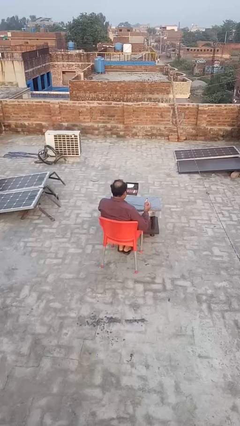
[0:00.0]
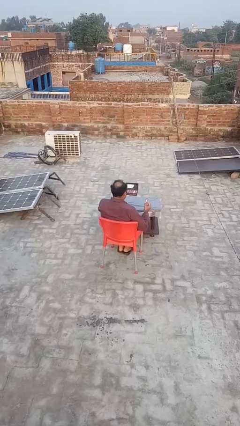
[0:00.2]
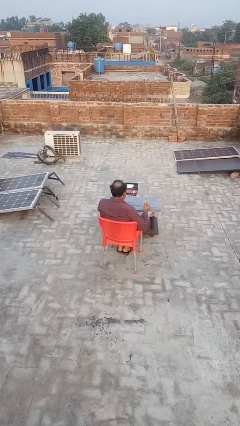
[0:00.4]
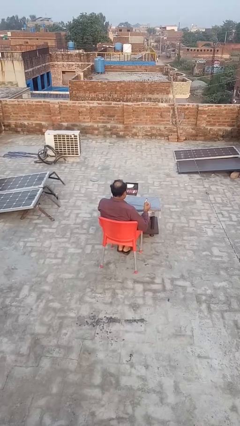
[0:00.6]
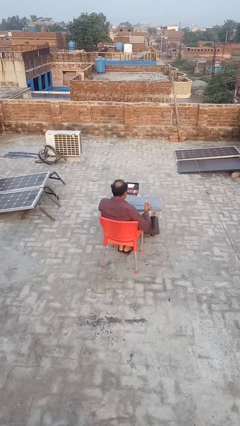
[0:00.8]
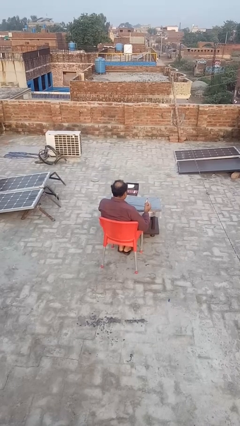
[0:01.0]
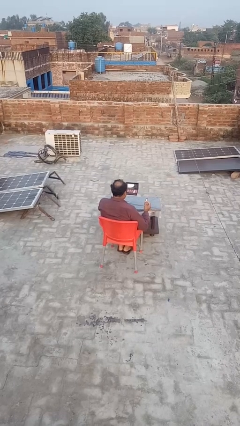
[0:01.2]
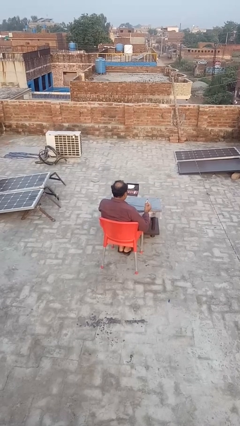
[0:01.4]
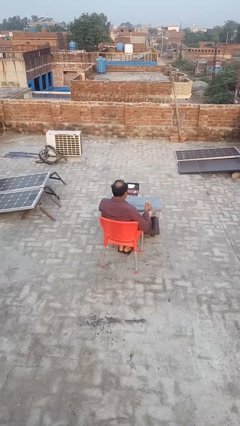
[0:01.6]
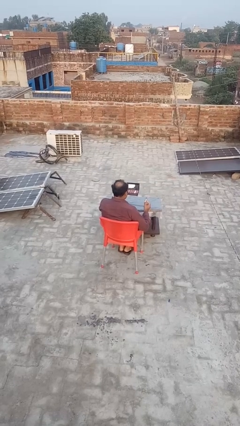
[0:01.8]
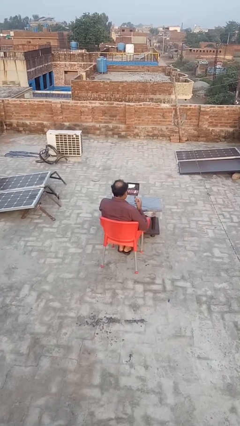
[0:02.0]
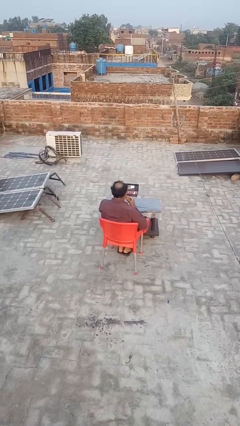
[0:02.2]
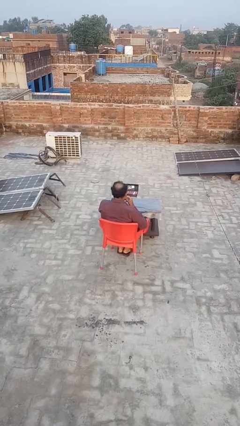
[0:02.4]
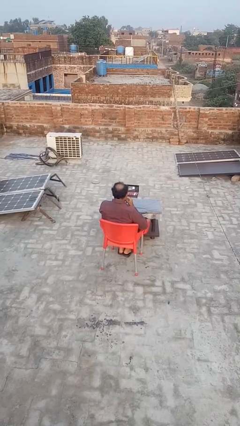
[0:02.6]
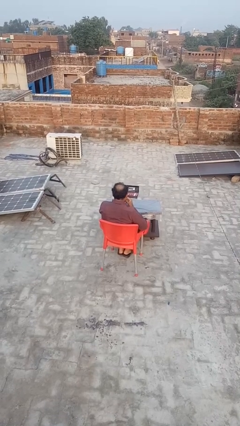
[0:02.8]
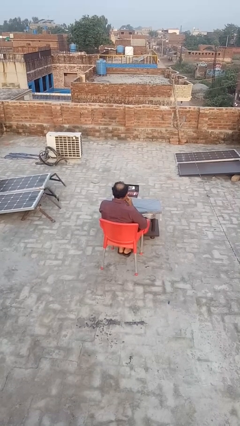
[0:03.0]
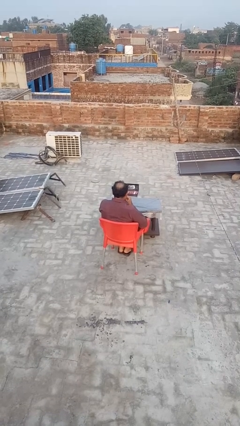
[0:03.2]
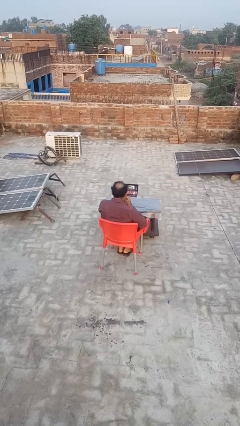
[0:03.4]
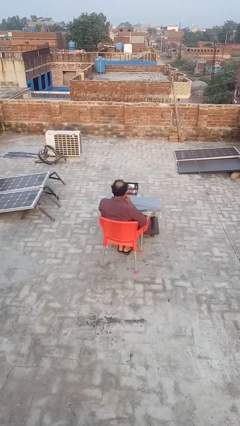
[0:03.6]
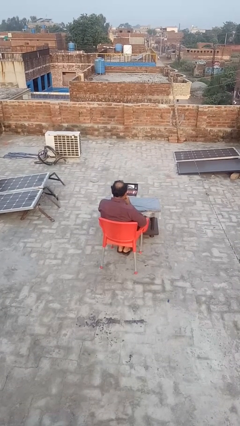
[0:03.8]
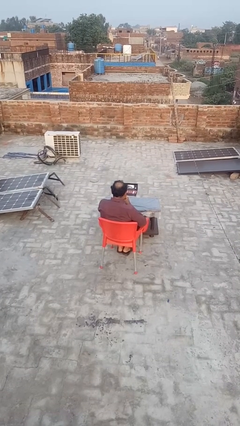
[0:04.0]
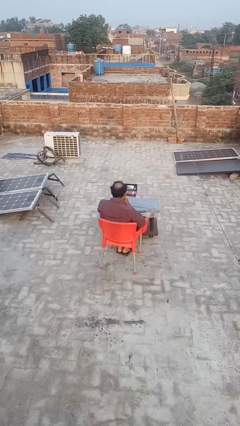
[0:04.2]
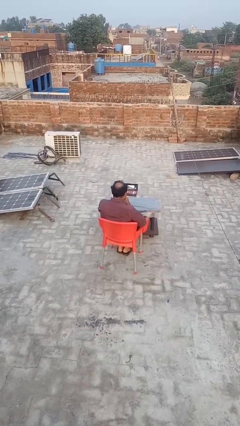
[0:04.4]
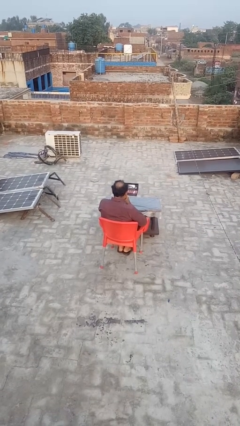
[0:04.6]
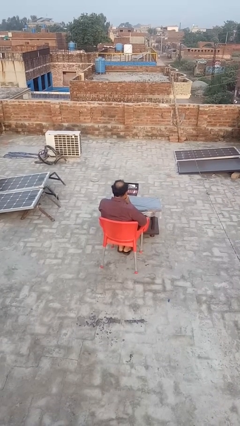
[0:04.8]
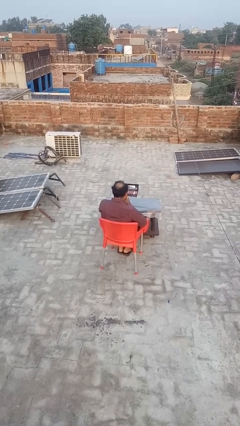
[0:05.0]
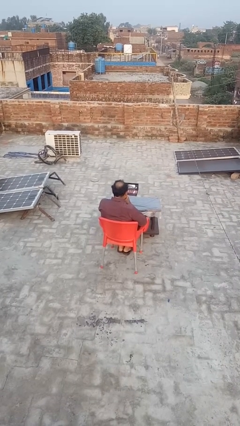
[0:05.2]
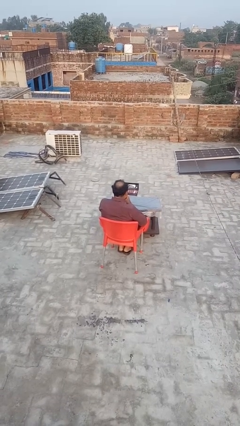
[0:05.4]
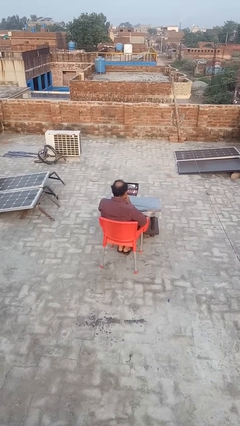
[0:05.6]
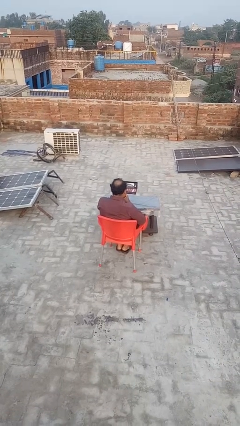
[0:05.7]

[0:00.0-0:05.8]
person applies lip makeup

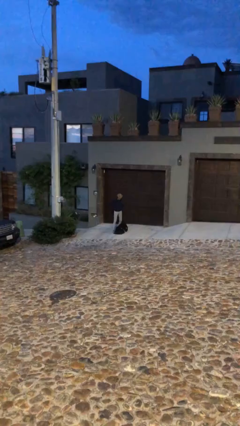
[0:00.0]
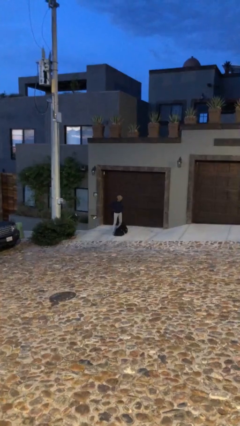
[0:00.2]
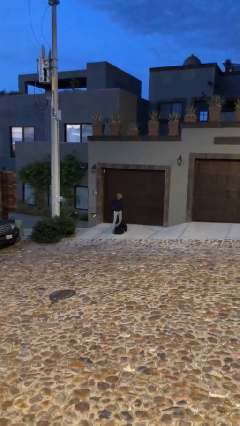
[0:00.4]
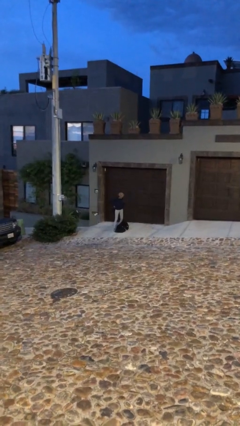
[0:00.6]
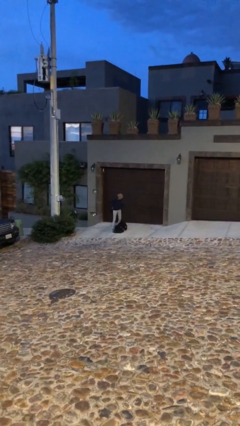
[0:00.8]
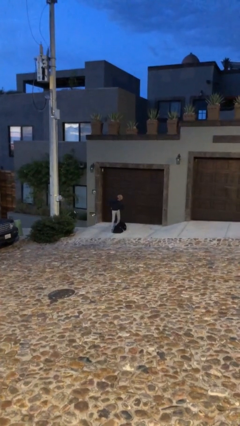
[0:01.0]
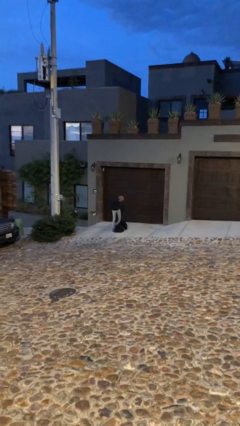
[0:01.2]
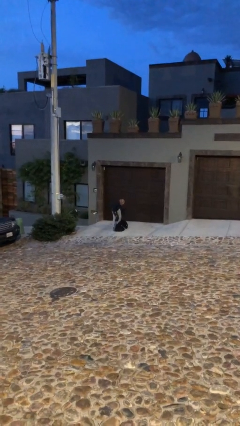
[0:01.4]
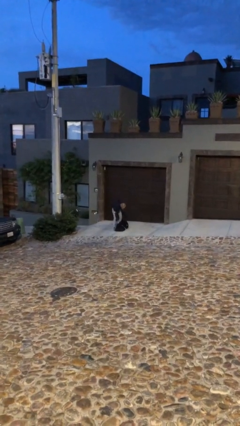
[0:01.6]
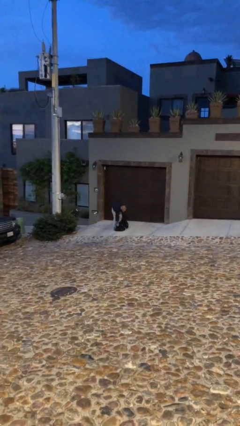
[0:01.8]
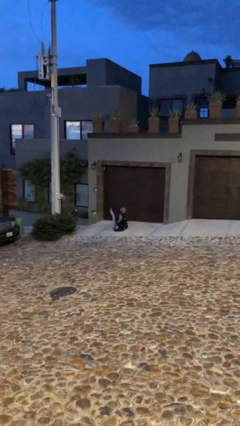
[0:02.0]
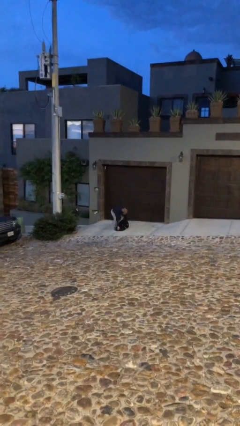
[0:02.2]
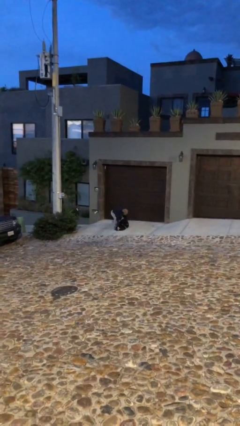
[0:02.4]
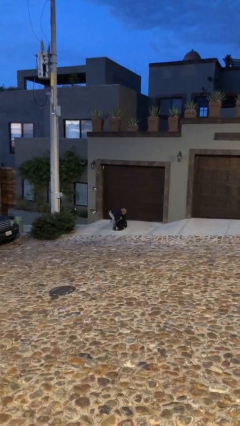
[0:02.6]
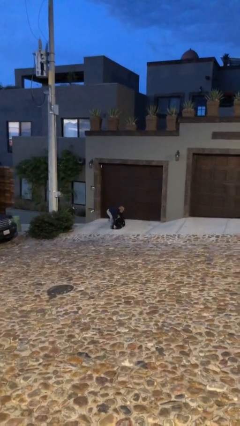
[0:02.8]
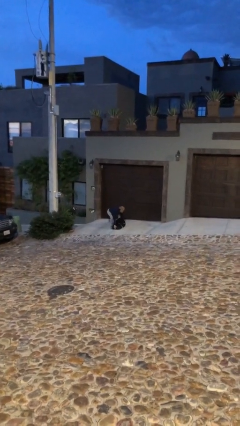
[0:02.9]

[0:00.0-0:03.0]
person picks up object from floor

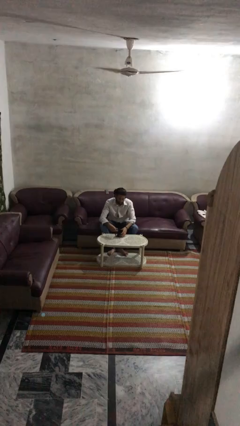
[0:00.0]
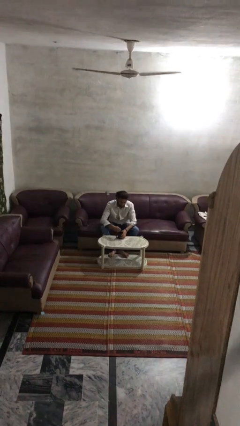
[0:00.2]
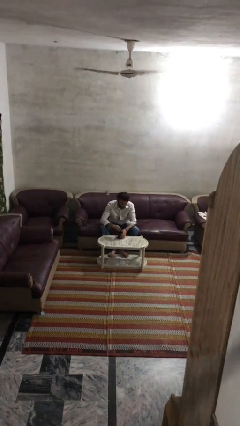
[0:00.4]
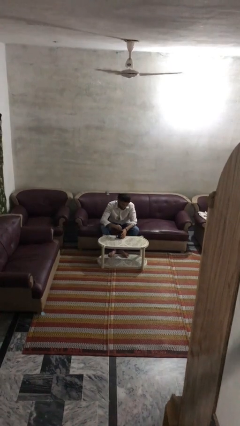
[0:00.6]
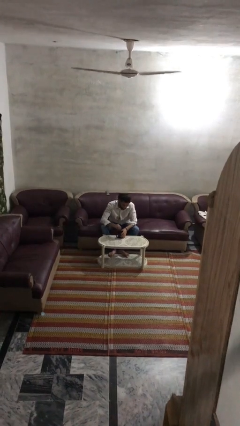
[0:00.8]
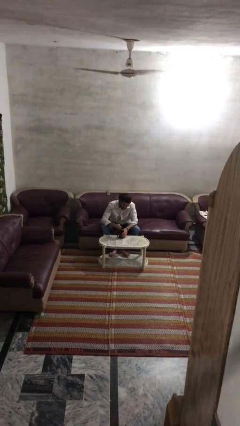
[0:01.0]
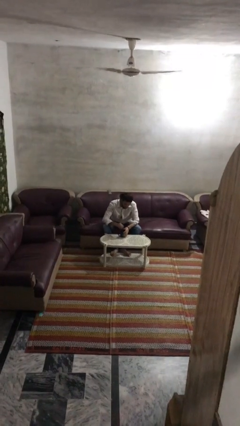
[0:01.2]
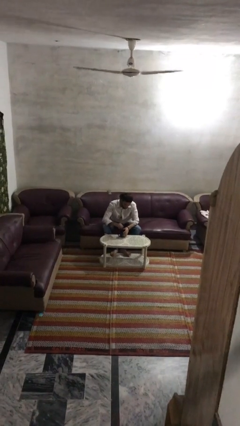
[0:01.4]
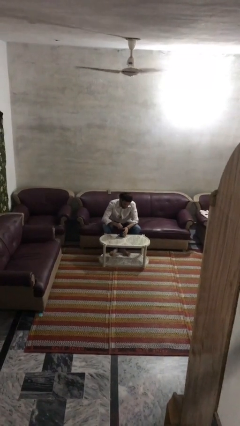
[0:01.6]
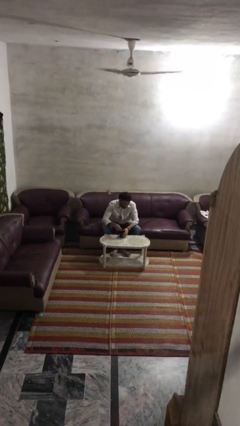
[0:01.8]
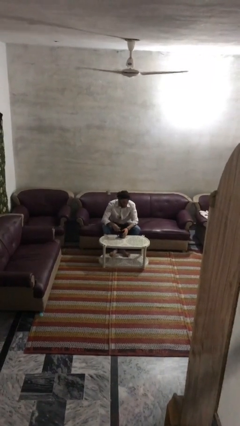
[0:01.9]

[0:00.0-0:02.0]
person stirs mug

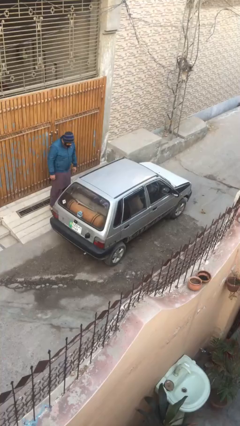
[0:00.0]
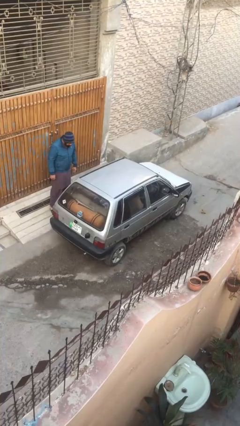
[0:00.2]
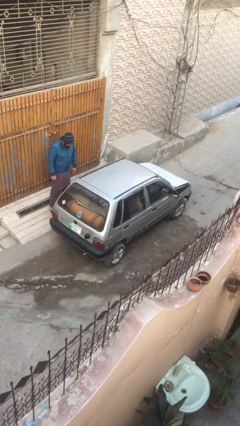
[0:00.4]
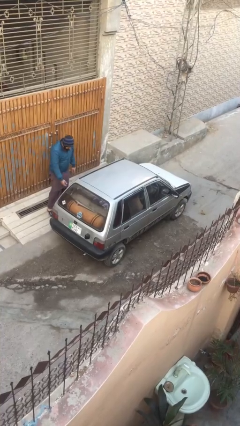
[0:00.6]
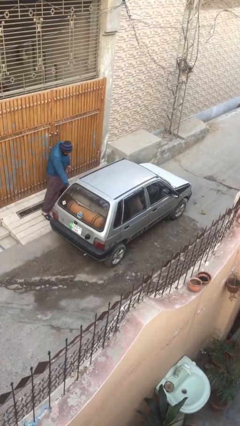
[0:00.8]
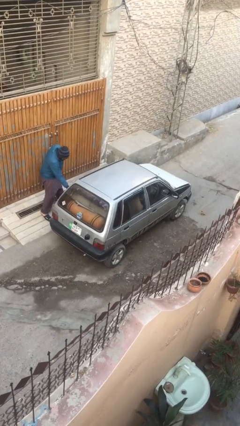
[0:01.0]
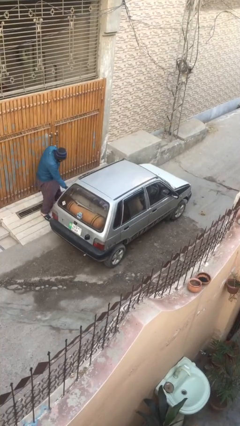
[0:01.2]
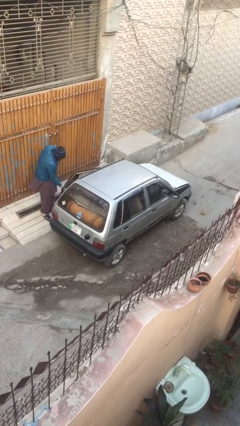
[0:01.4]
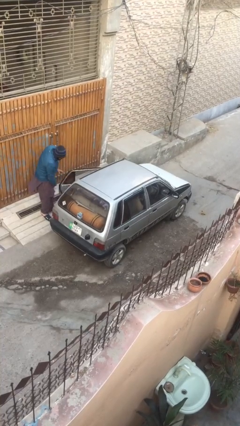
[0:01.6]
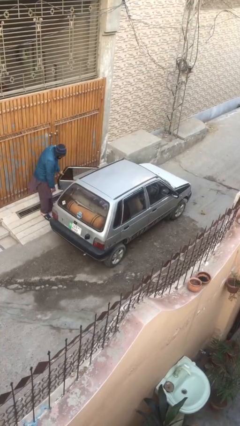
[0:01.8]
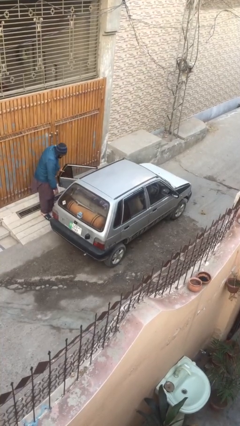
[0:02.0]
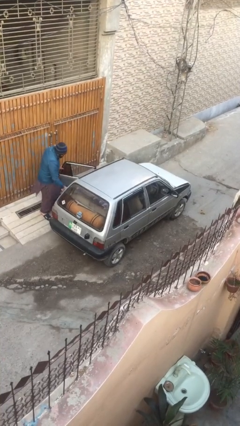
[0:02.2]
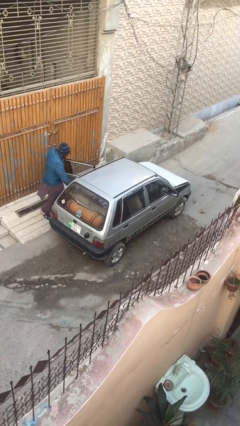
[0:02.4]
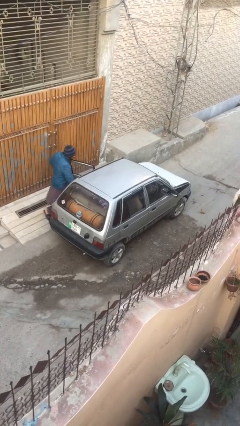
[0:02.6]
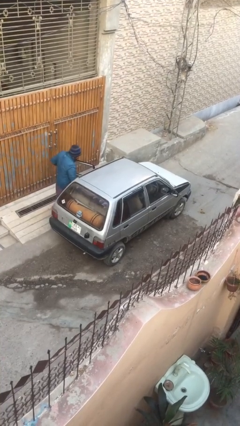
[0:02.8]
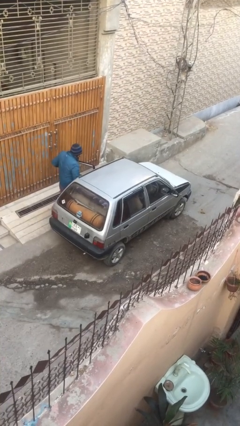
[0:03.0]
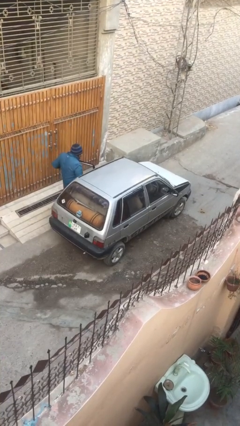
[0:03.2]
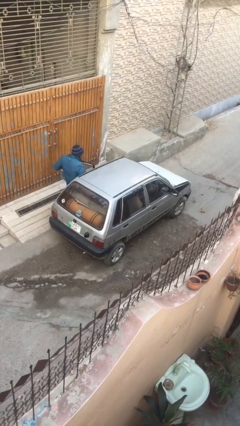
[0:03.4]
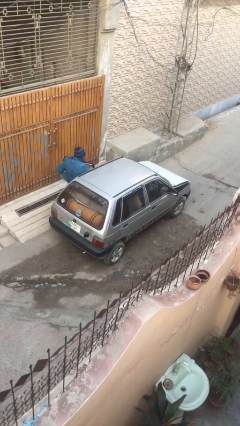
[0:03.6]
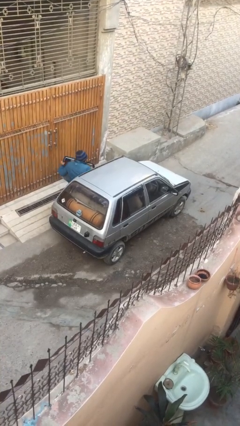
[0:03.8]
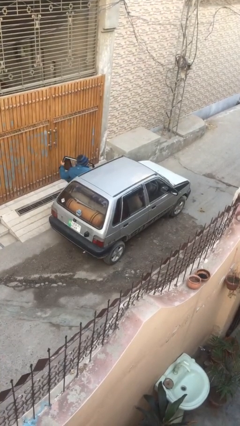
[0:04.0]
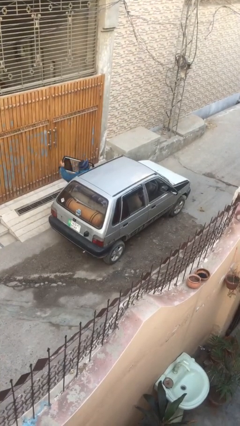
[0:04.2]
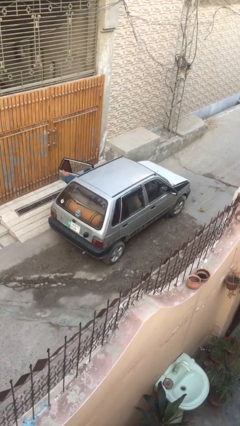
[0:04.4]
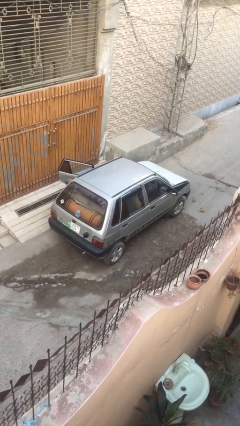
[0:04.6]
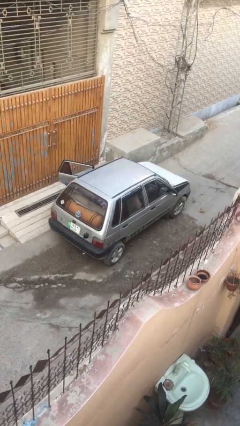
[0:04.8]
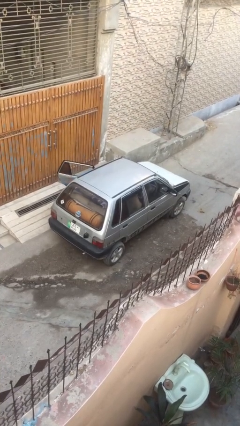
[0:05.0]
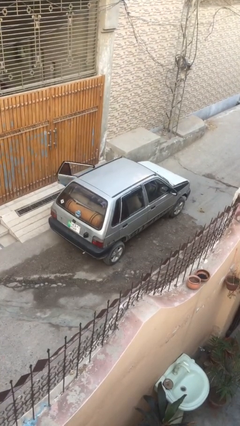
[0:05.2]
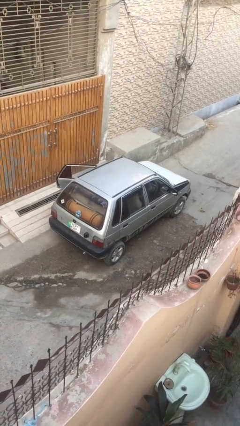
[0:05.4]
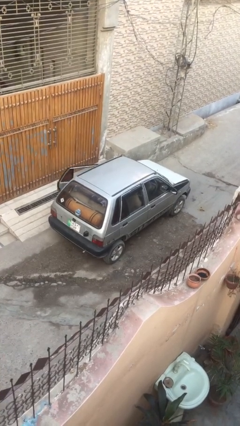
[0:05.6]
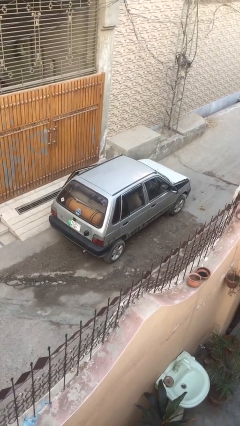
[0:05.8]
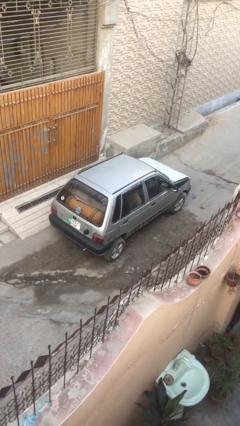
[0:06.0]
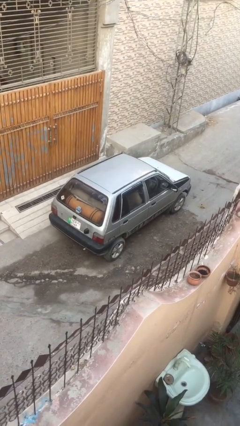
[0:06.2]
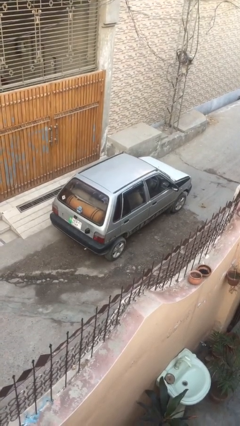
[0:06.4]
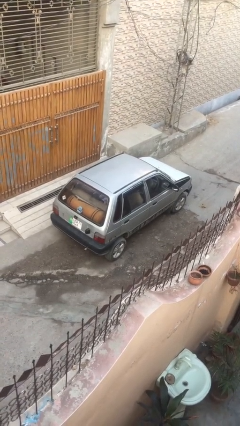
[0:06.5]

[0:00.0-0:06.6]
car picks up person

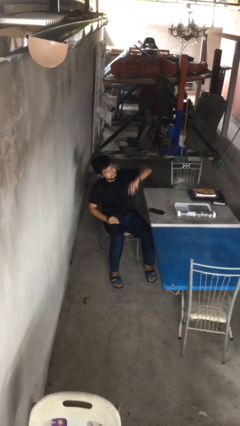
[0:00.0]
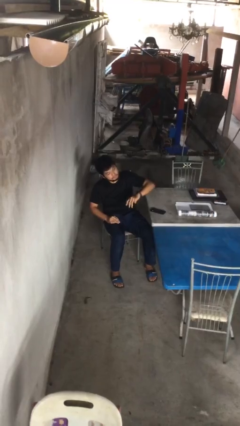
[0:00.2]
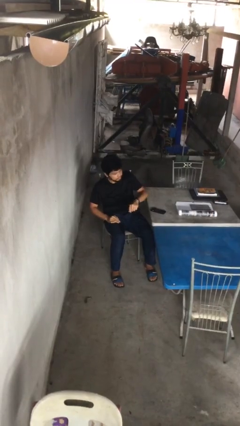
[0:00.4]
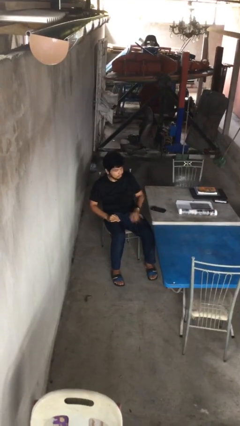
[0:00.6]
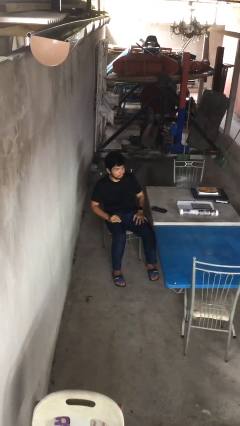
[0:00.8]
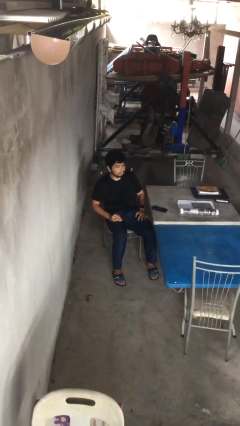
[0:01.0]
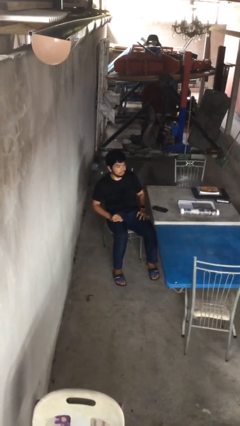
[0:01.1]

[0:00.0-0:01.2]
person gestures swipe down
